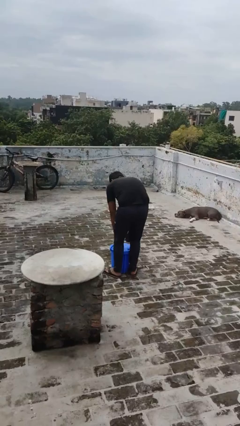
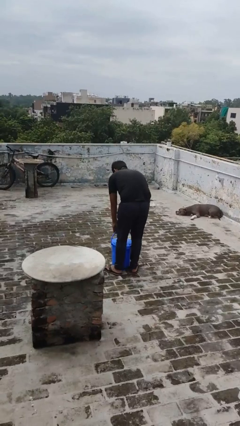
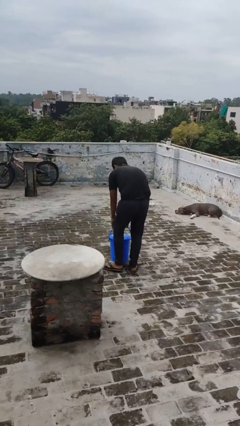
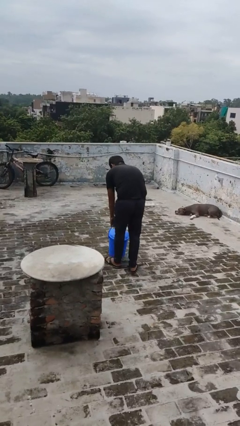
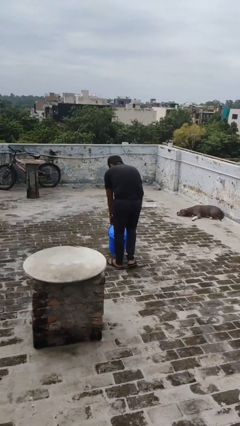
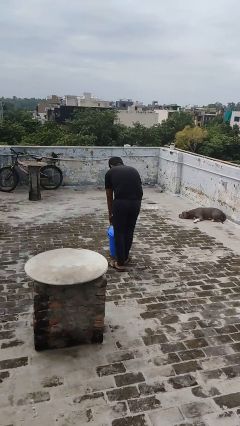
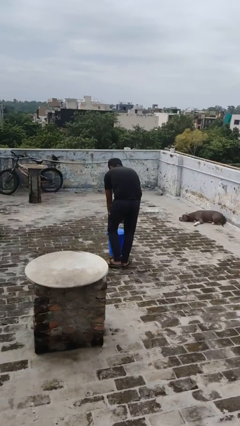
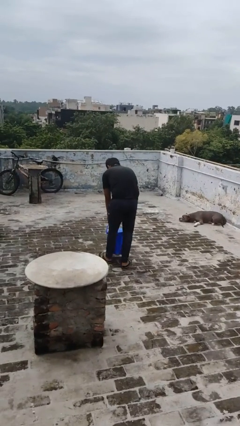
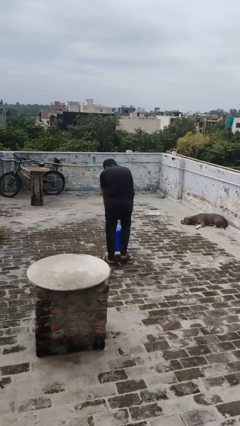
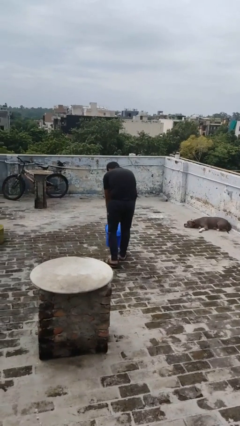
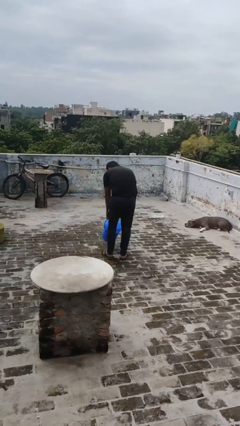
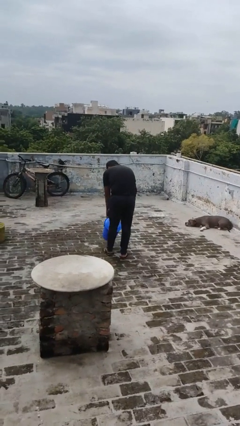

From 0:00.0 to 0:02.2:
person pushes wheeled trashcan

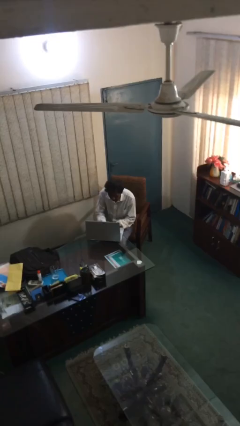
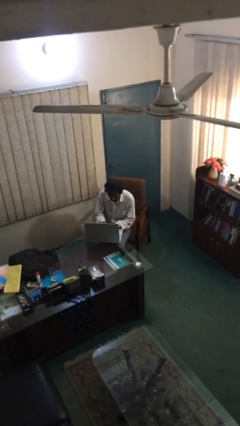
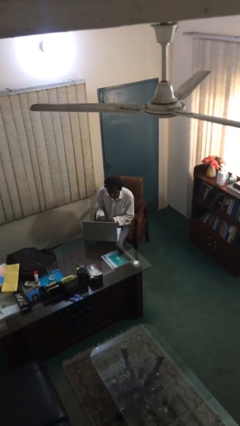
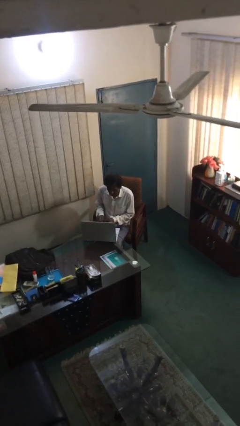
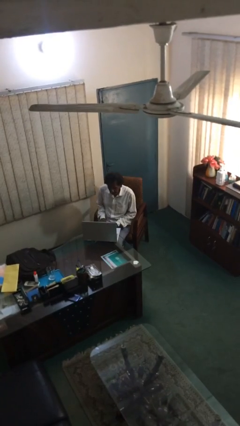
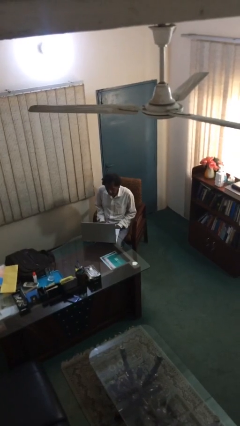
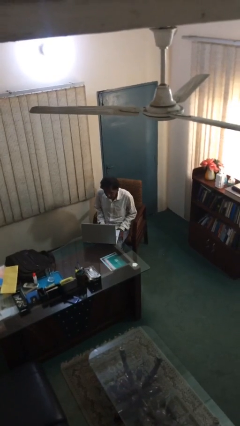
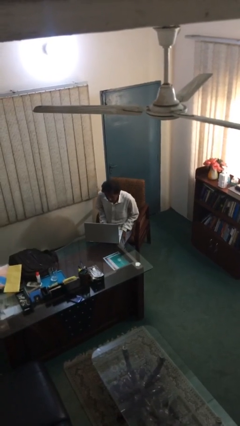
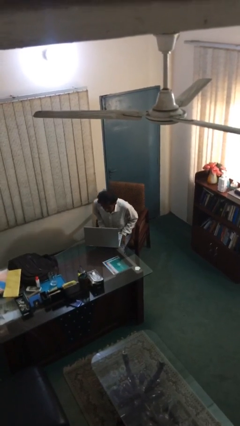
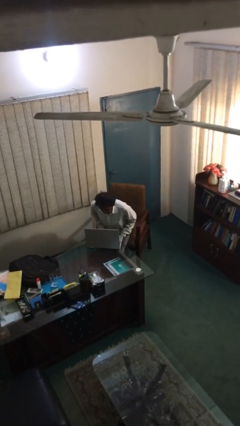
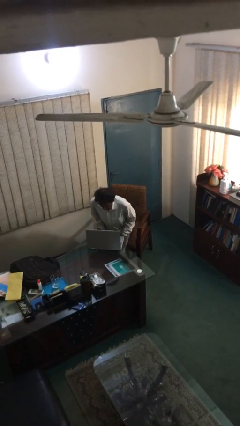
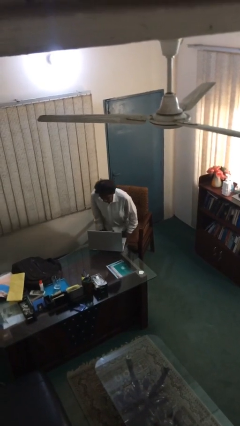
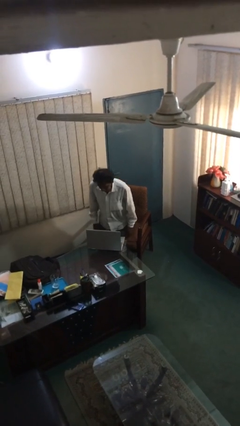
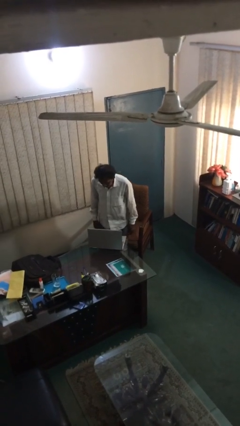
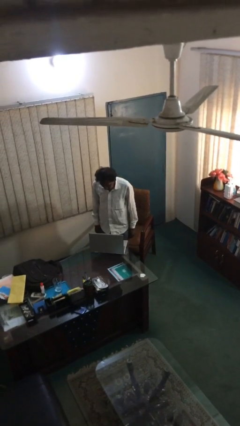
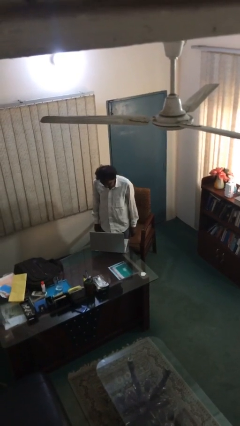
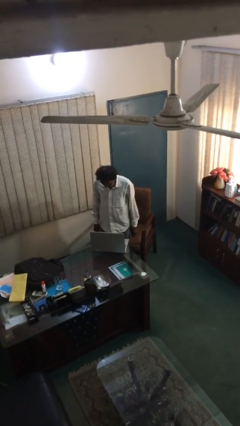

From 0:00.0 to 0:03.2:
person stands up

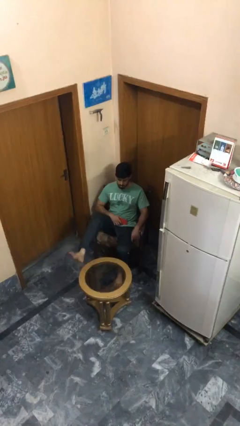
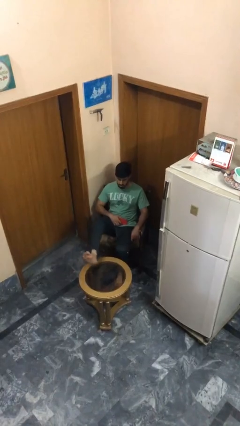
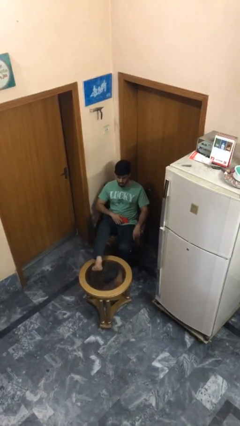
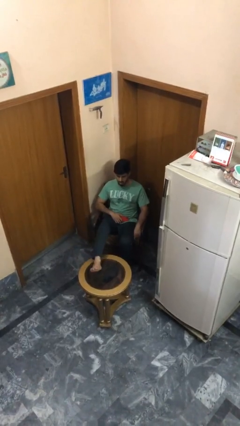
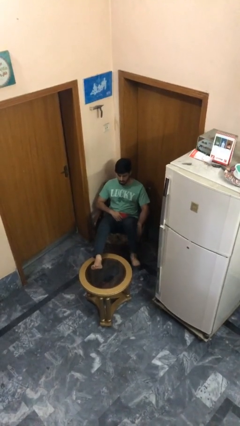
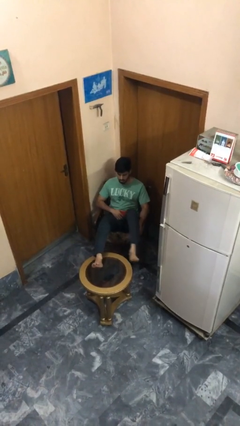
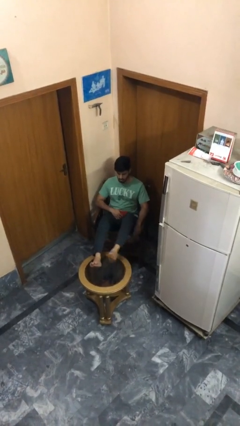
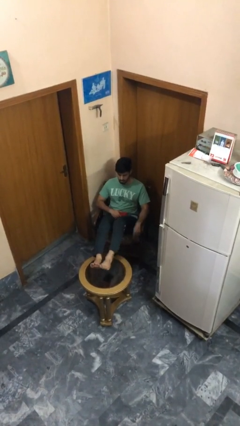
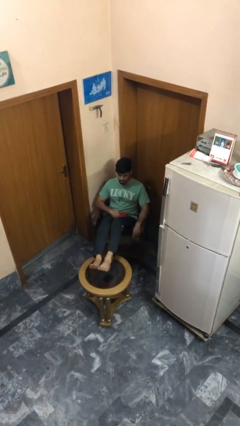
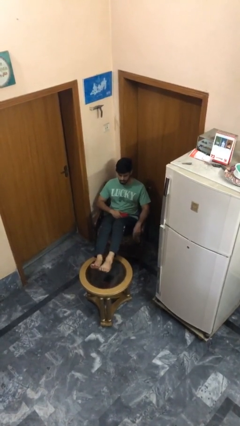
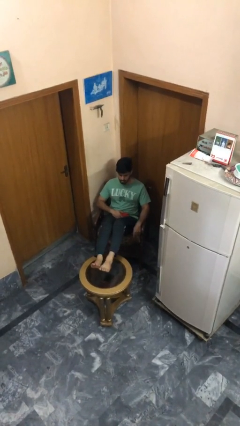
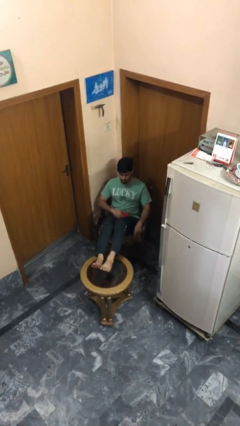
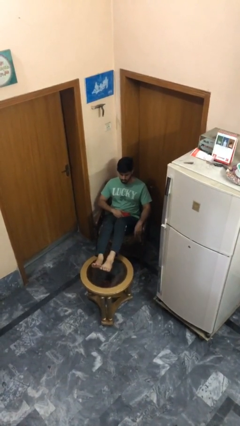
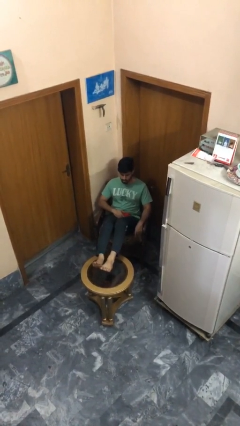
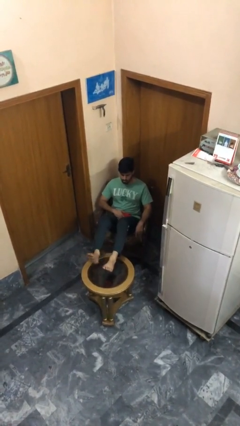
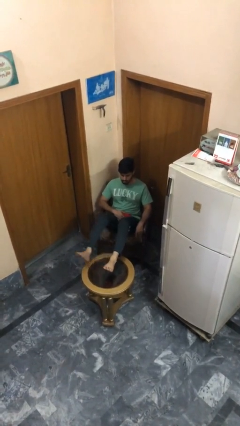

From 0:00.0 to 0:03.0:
person puts feet up

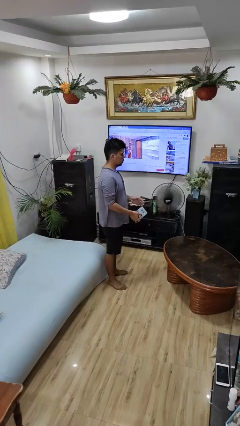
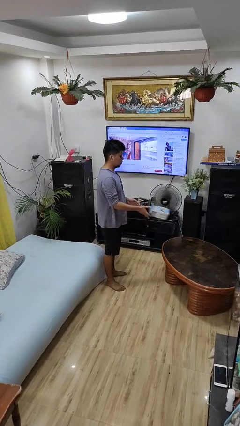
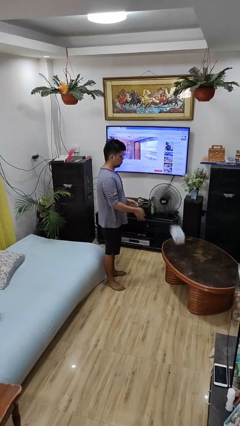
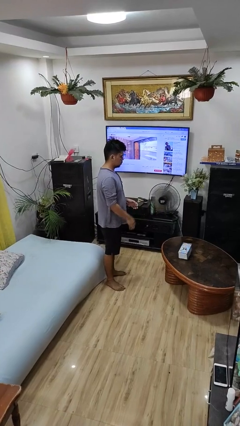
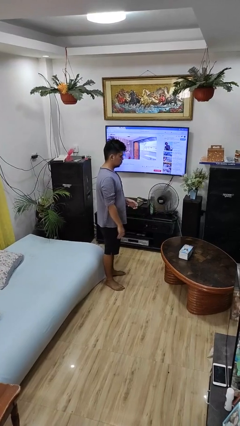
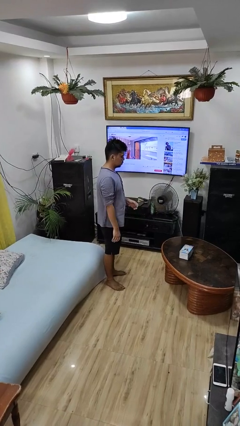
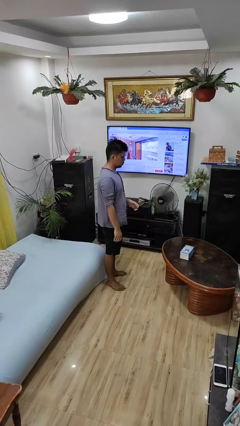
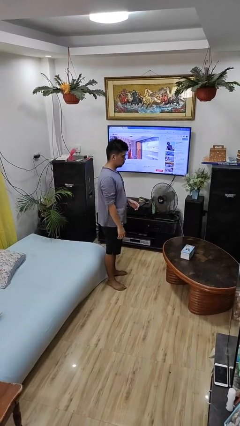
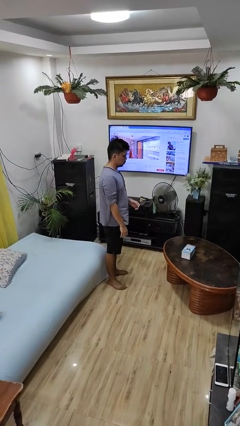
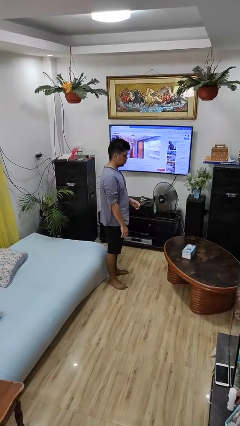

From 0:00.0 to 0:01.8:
person throws object on table

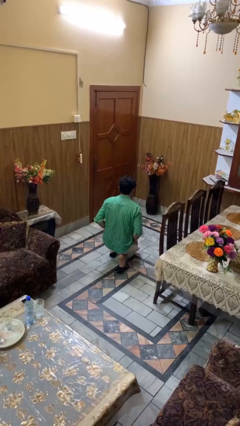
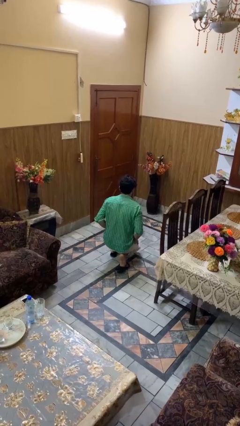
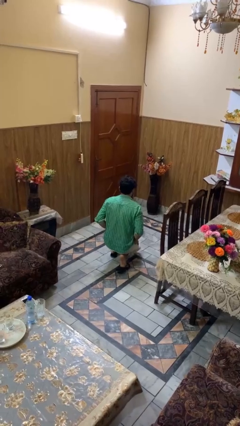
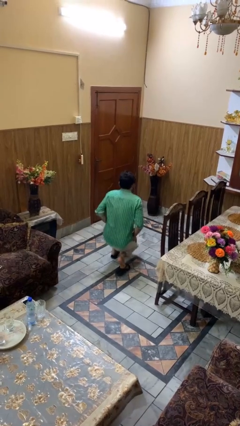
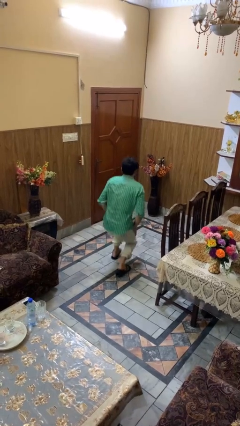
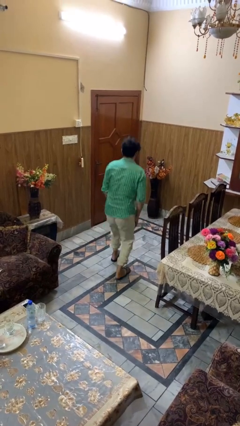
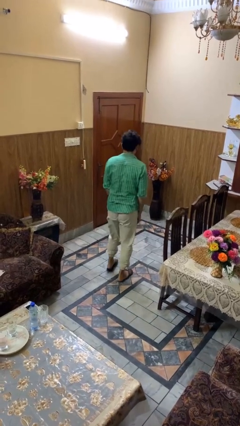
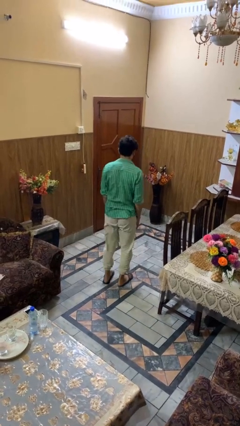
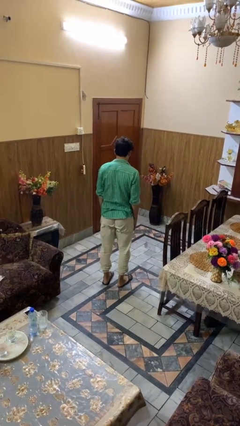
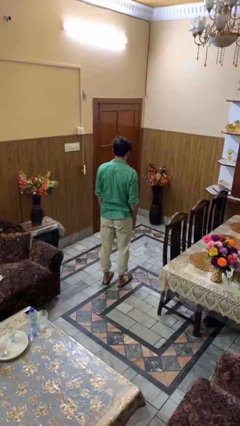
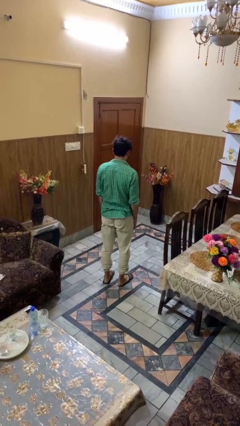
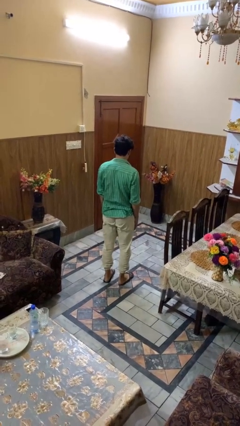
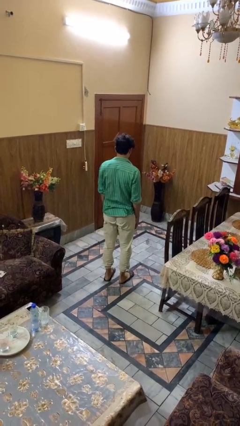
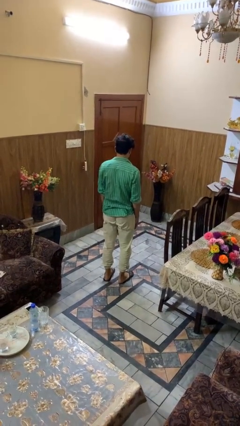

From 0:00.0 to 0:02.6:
person stands up from floor

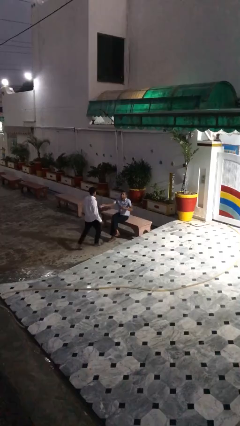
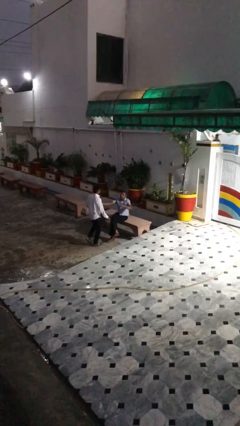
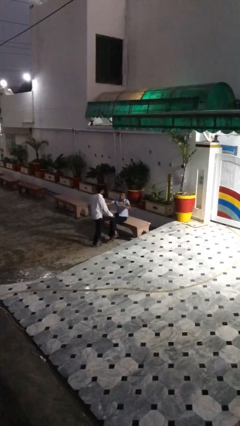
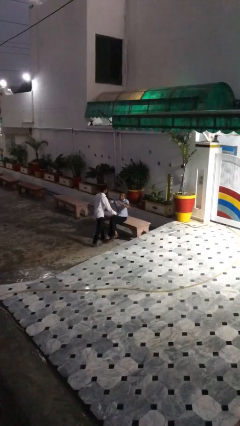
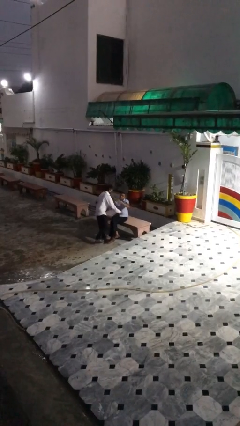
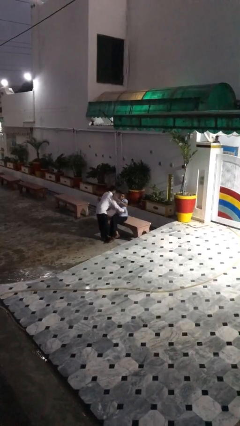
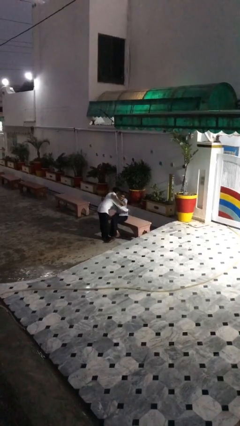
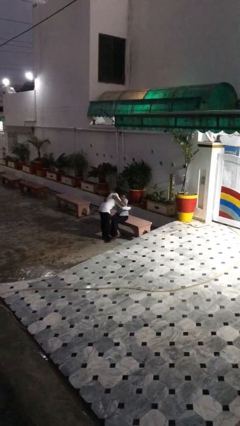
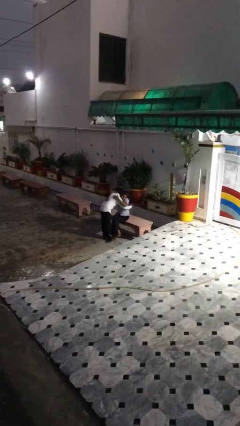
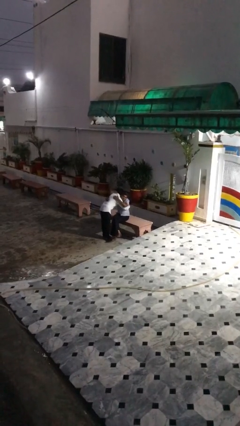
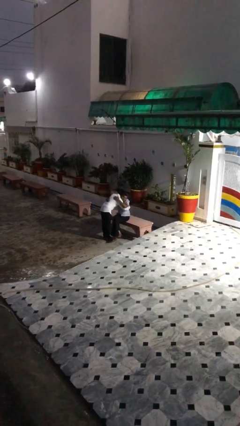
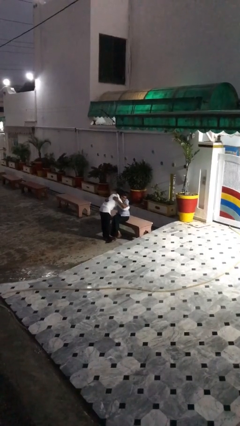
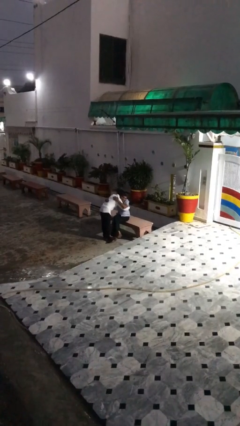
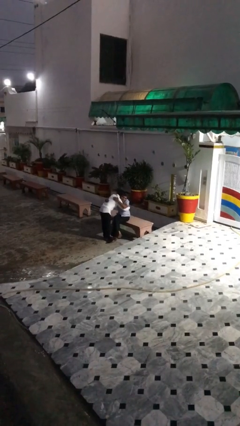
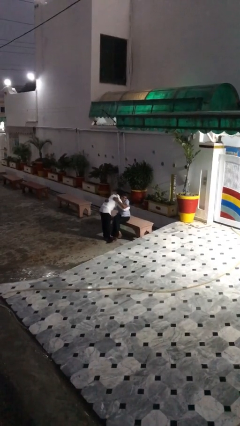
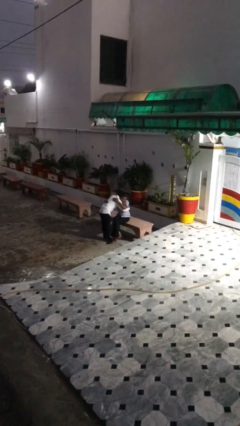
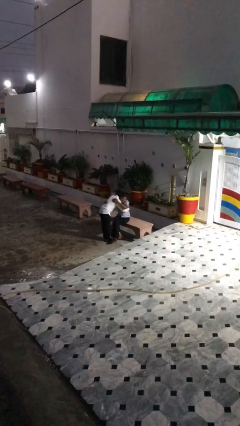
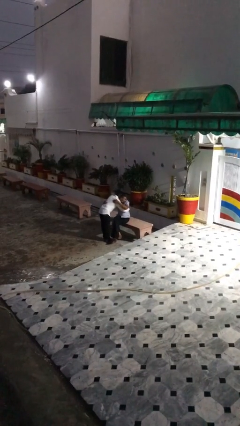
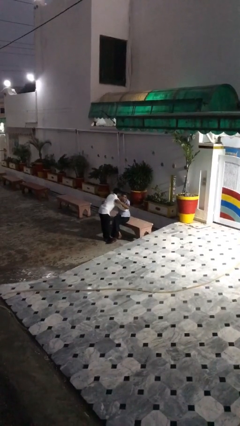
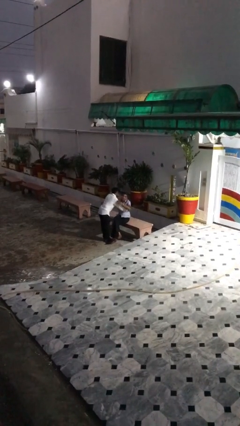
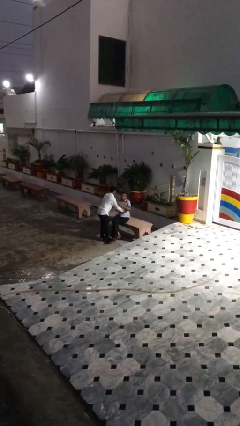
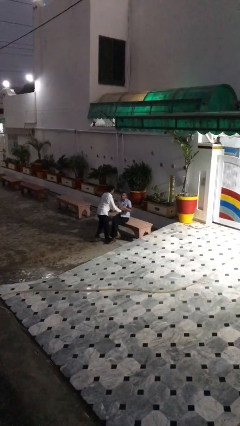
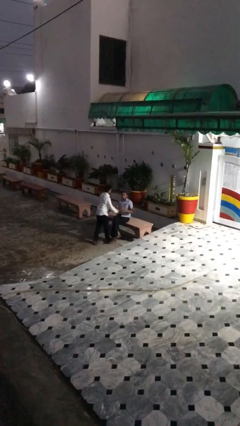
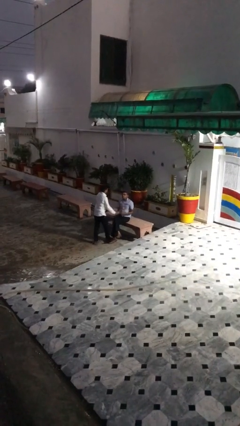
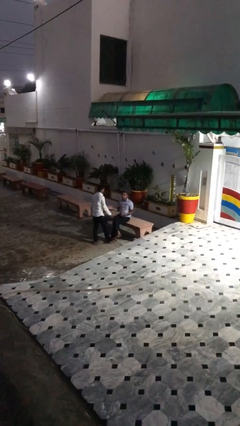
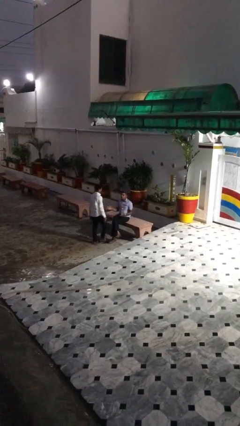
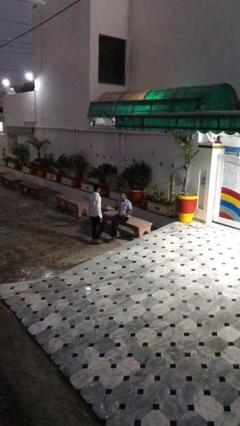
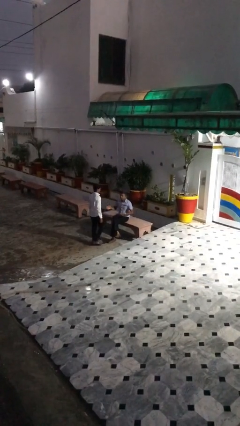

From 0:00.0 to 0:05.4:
person embraces person
